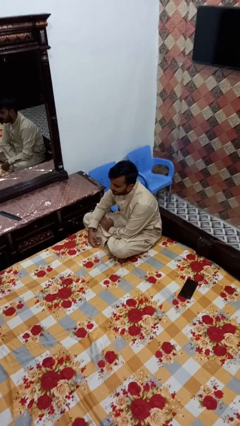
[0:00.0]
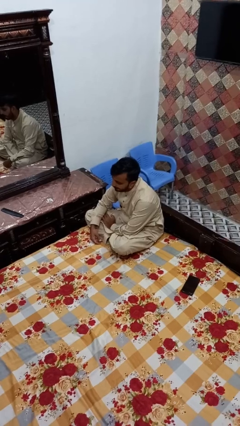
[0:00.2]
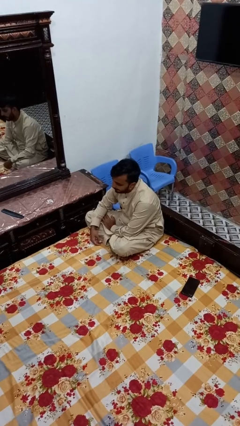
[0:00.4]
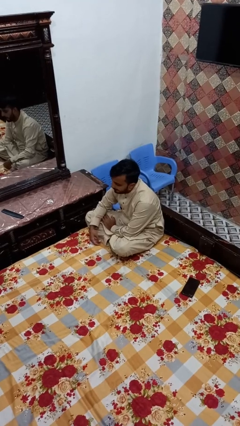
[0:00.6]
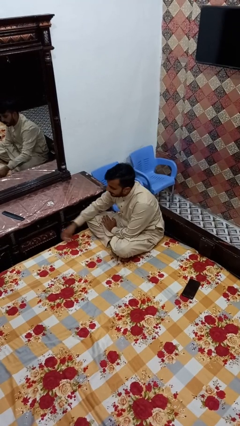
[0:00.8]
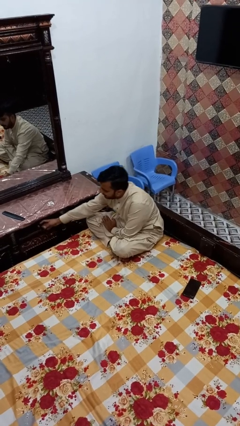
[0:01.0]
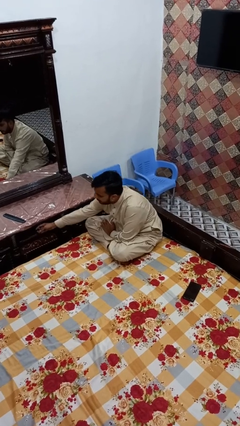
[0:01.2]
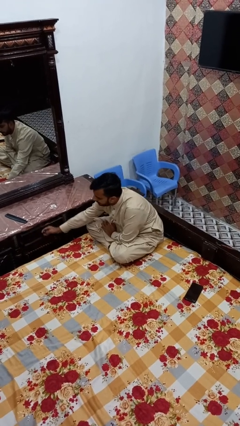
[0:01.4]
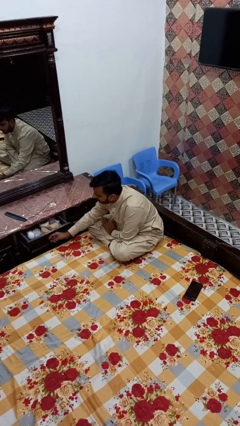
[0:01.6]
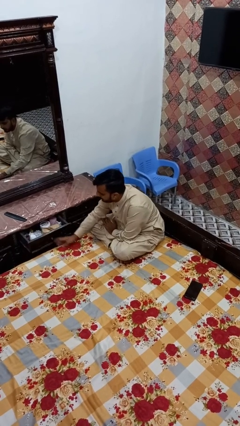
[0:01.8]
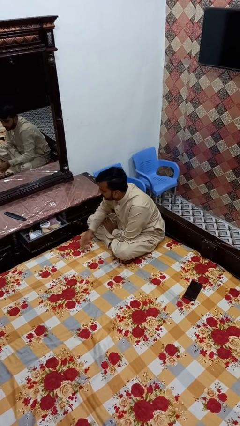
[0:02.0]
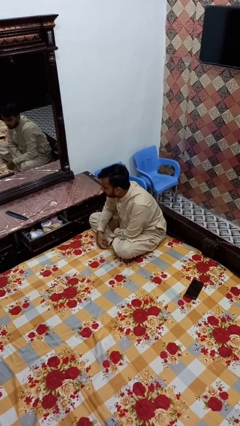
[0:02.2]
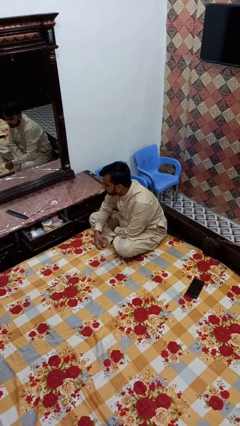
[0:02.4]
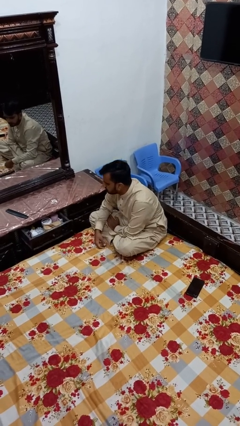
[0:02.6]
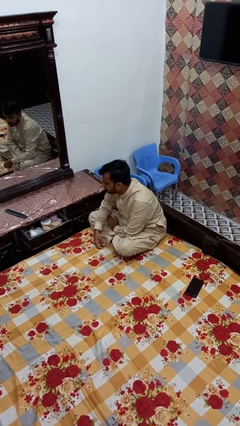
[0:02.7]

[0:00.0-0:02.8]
person opens dresser drawer

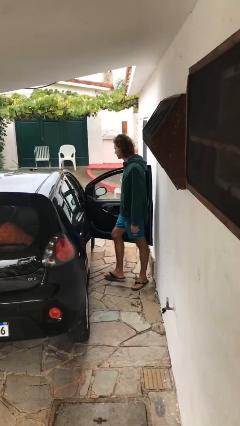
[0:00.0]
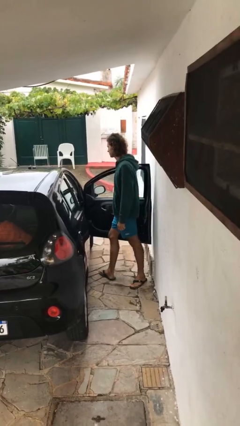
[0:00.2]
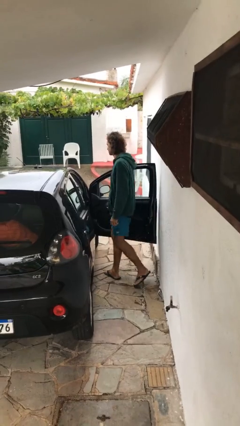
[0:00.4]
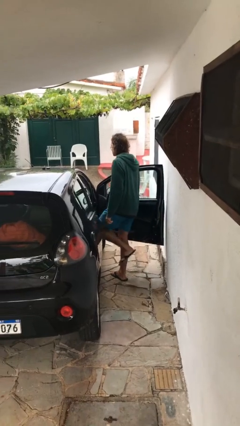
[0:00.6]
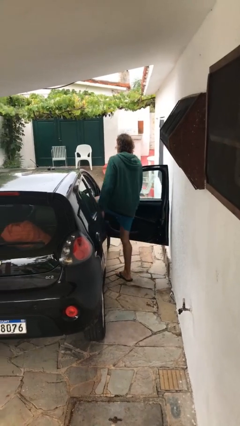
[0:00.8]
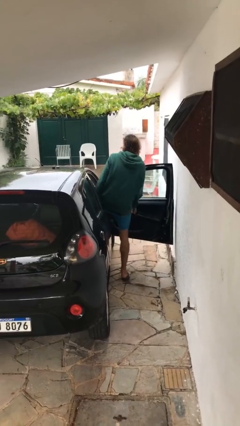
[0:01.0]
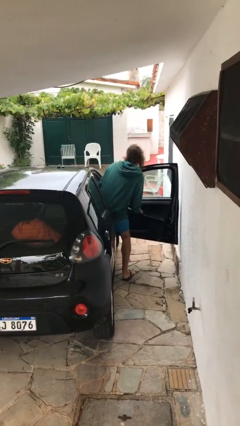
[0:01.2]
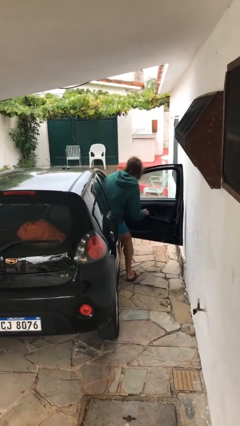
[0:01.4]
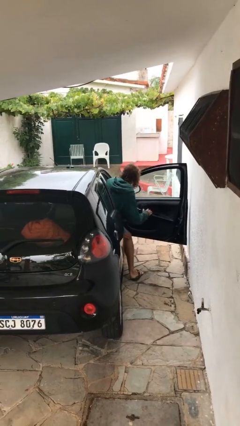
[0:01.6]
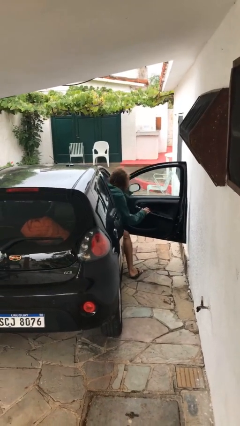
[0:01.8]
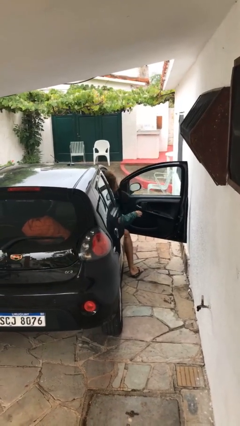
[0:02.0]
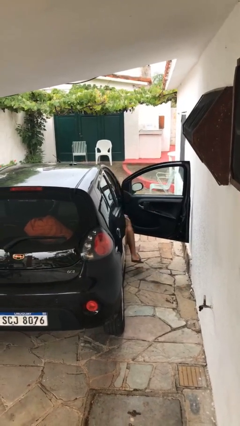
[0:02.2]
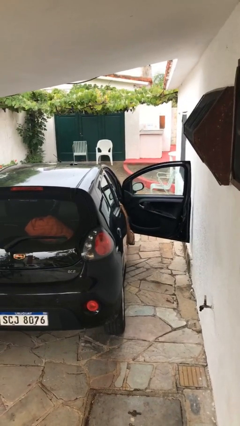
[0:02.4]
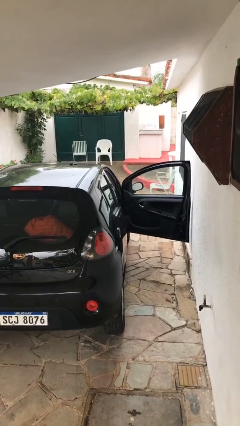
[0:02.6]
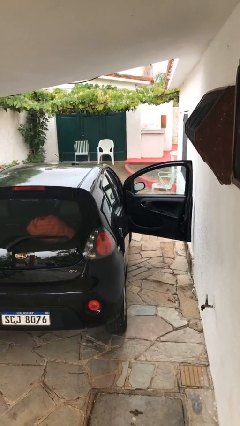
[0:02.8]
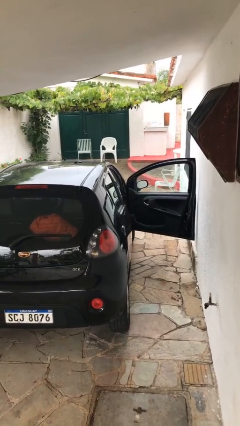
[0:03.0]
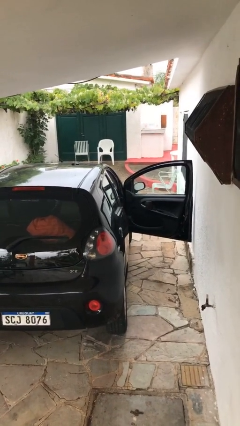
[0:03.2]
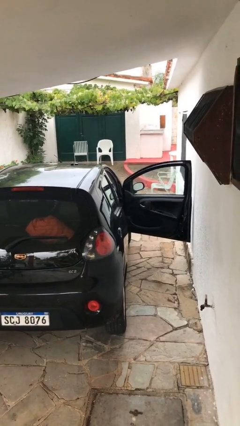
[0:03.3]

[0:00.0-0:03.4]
person enters car

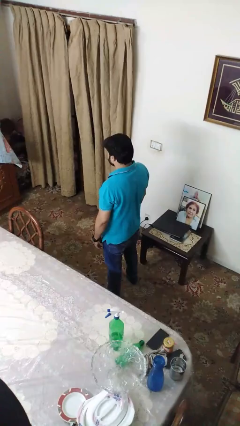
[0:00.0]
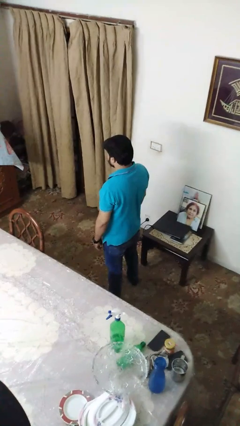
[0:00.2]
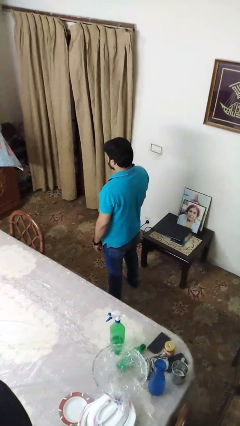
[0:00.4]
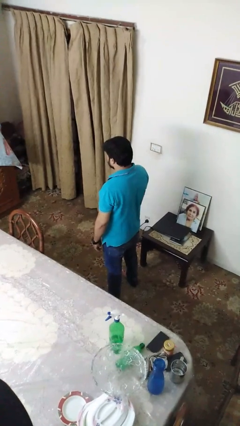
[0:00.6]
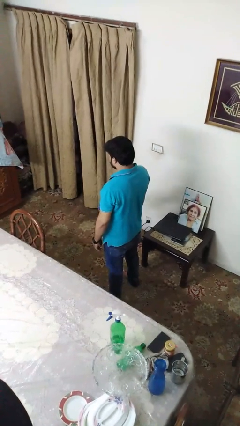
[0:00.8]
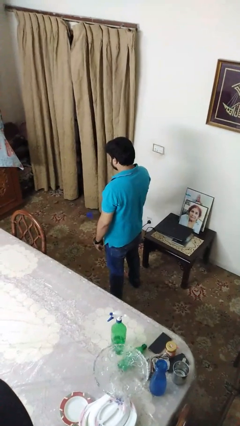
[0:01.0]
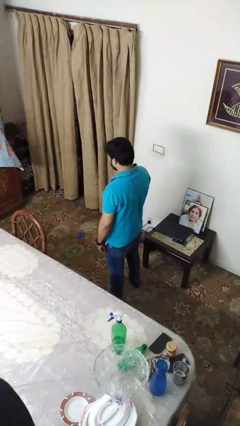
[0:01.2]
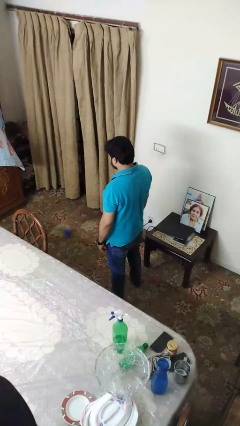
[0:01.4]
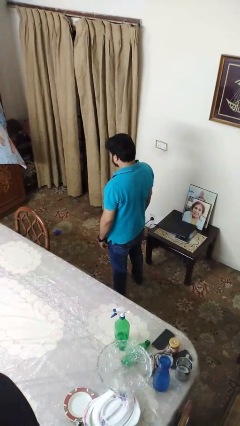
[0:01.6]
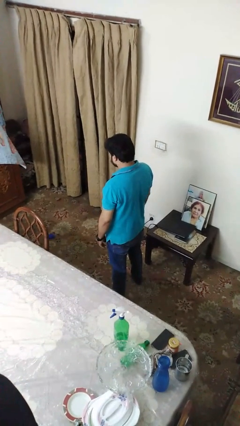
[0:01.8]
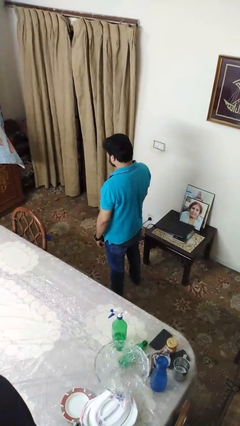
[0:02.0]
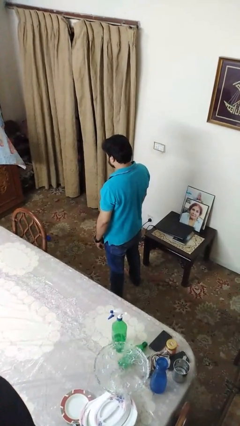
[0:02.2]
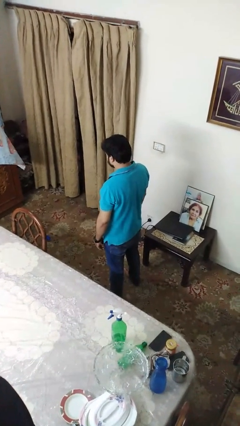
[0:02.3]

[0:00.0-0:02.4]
person throws object to ground

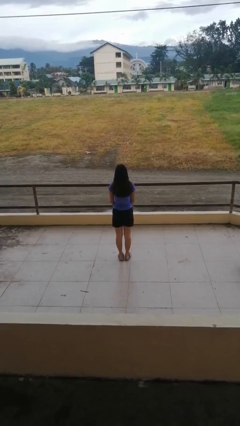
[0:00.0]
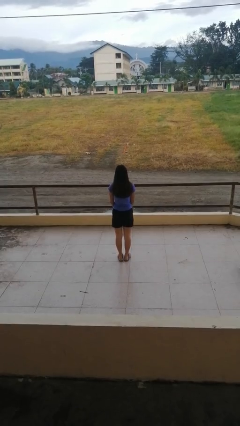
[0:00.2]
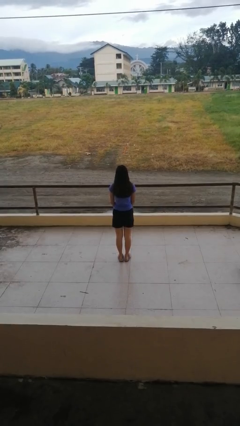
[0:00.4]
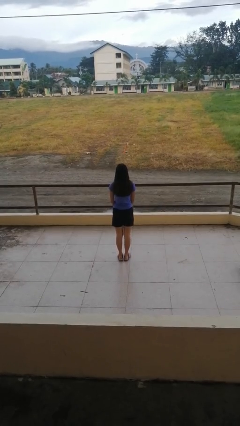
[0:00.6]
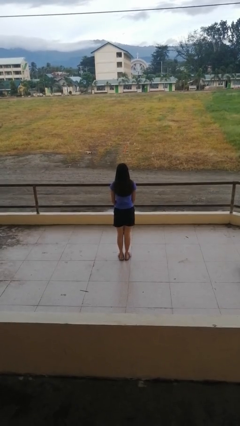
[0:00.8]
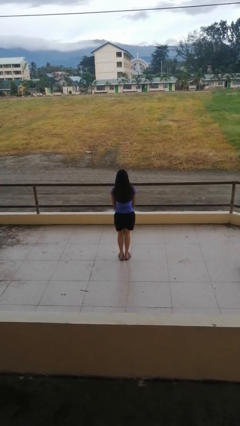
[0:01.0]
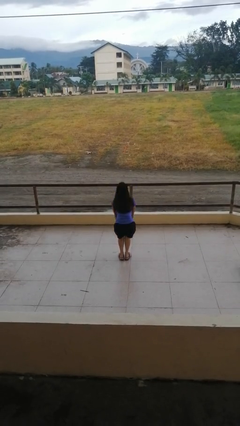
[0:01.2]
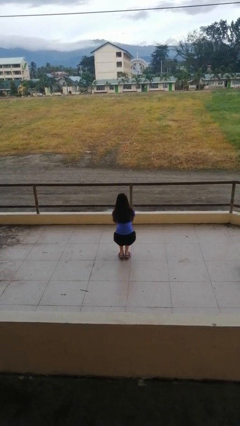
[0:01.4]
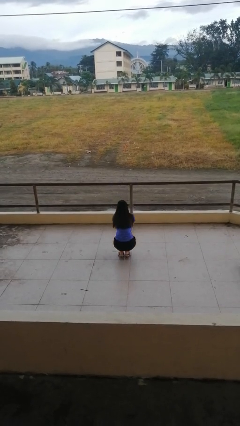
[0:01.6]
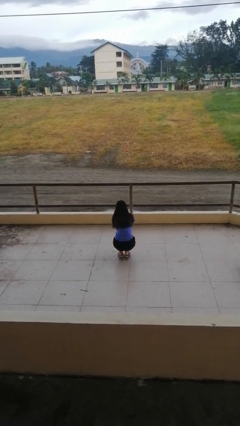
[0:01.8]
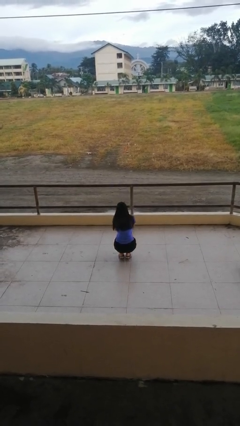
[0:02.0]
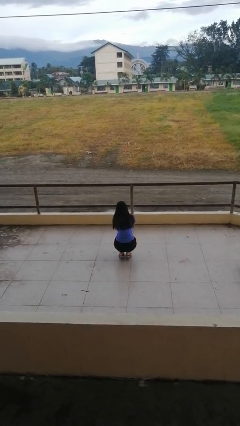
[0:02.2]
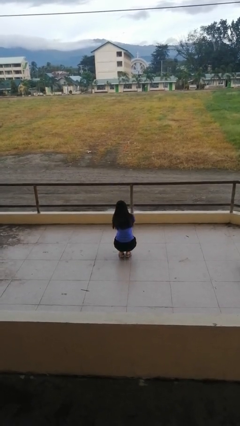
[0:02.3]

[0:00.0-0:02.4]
person squats

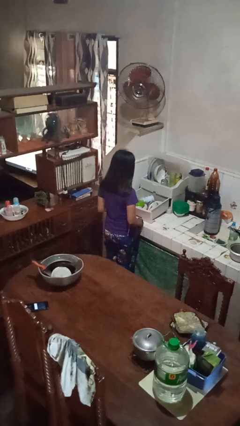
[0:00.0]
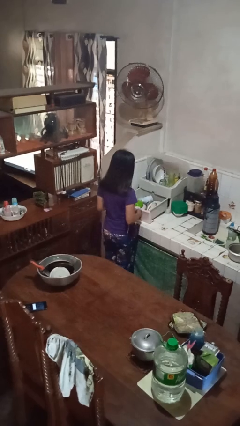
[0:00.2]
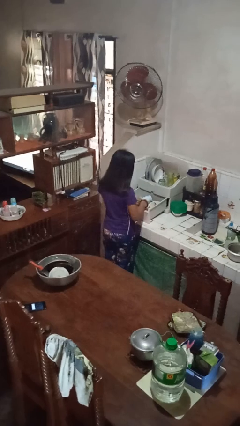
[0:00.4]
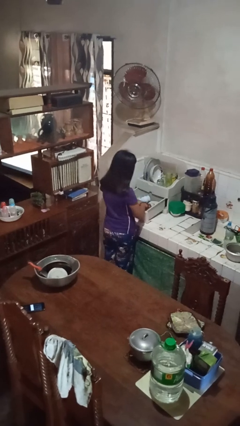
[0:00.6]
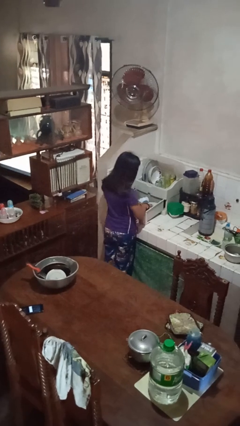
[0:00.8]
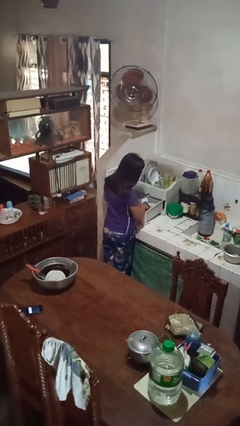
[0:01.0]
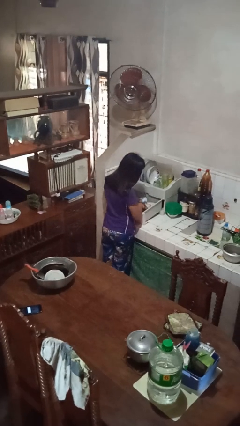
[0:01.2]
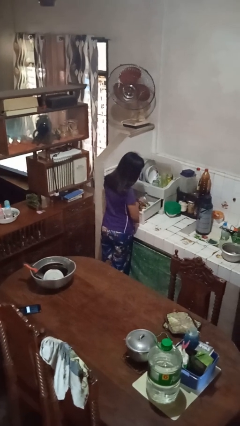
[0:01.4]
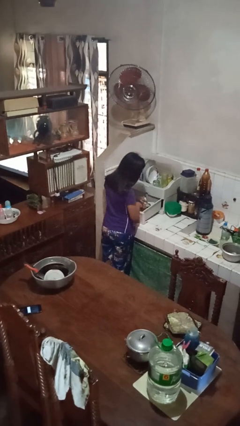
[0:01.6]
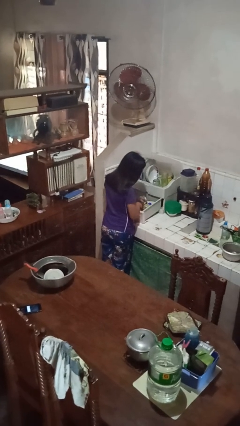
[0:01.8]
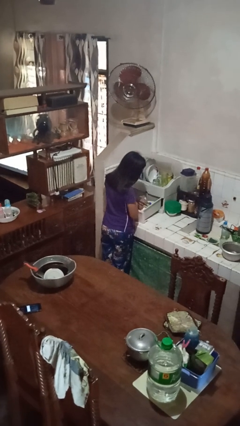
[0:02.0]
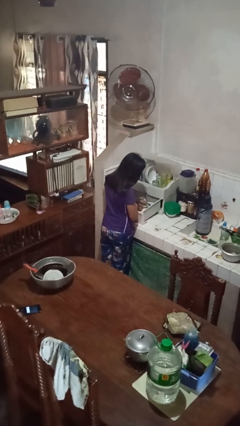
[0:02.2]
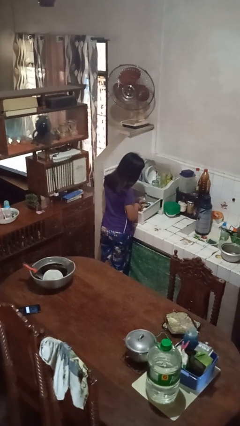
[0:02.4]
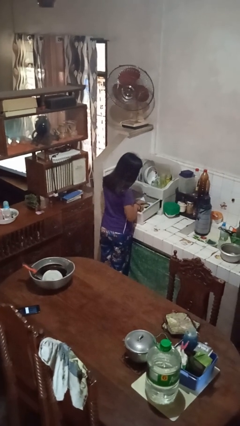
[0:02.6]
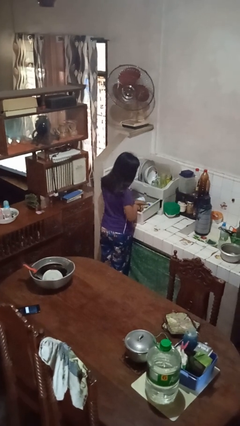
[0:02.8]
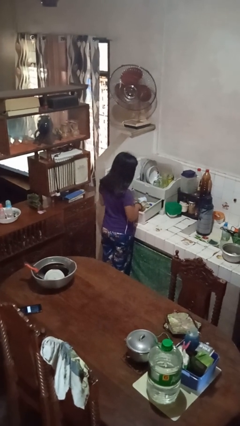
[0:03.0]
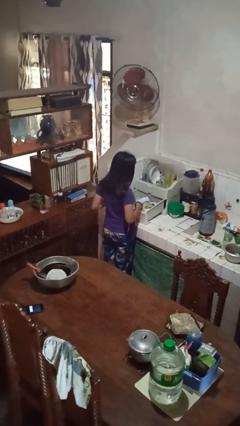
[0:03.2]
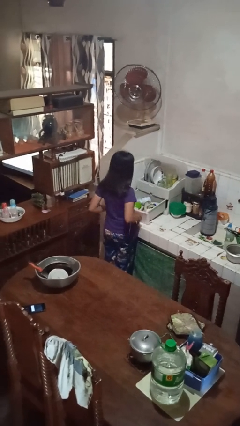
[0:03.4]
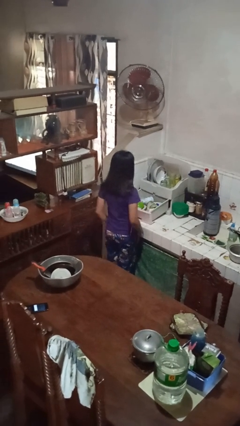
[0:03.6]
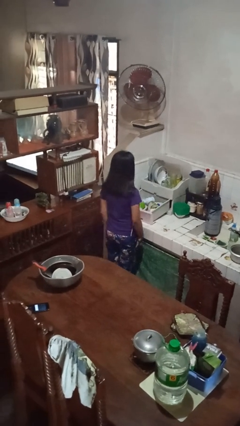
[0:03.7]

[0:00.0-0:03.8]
person searches in kitchen drawer

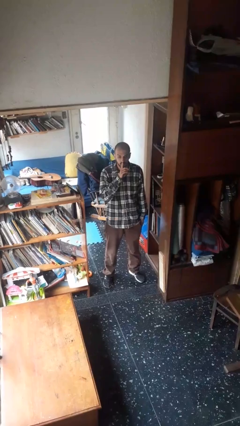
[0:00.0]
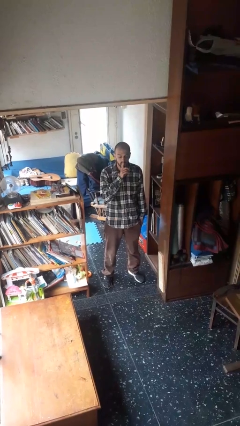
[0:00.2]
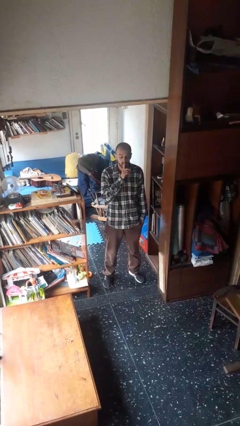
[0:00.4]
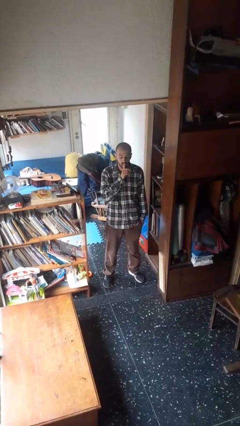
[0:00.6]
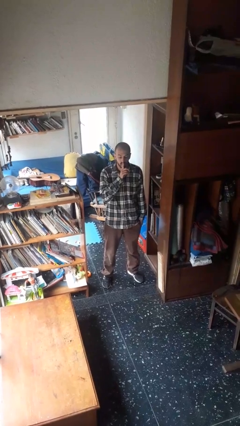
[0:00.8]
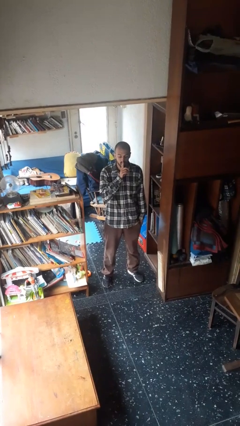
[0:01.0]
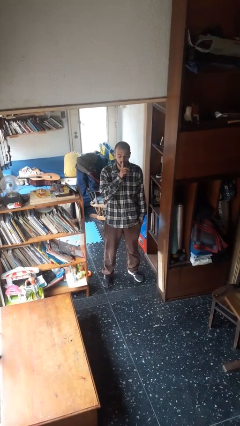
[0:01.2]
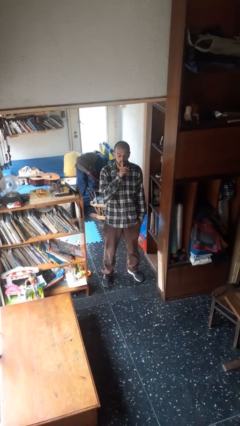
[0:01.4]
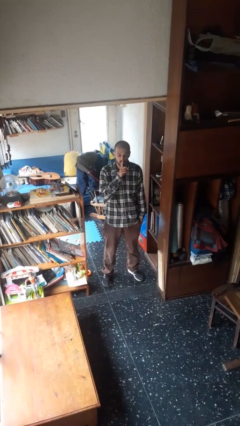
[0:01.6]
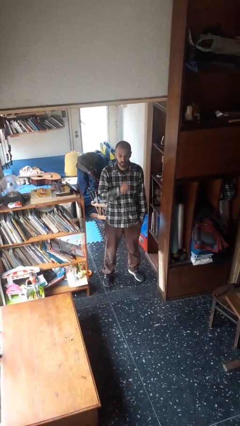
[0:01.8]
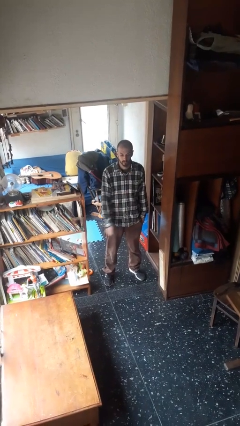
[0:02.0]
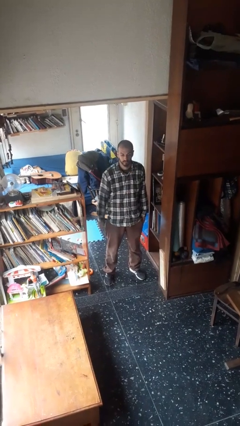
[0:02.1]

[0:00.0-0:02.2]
person gestures be quiet
